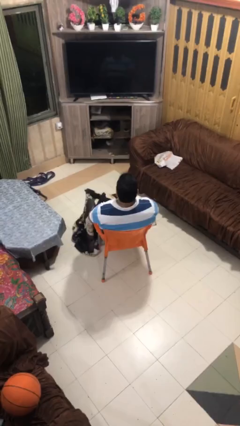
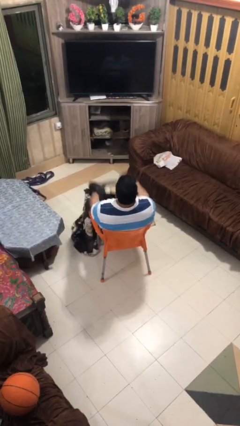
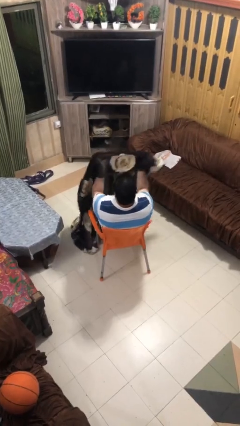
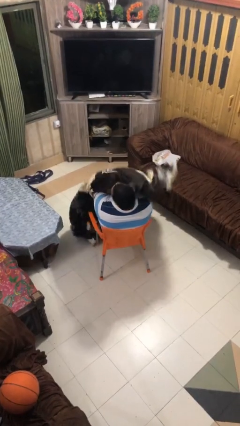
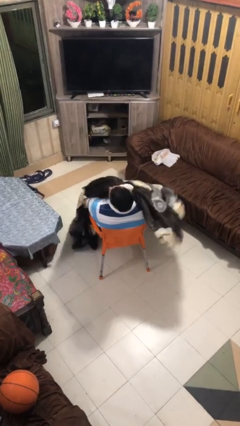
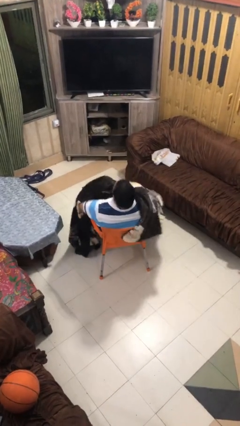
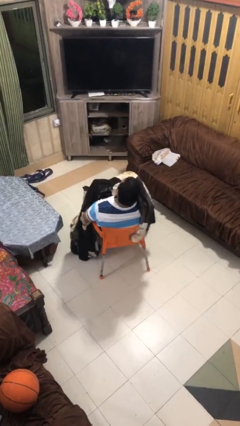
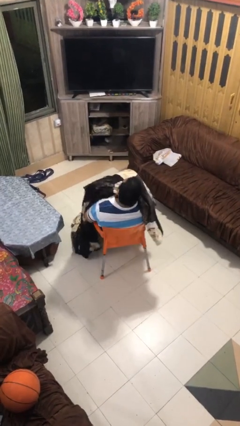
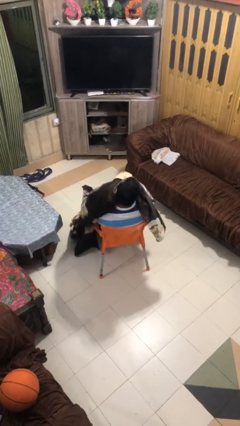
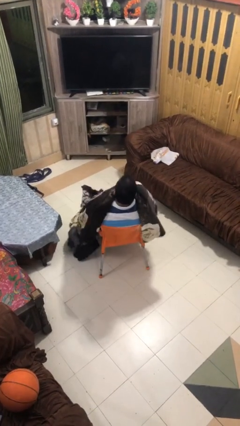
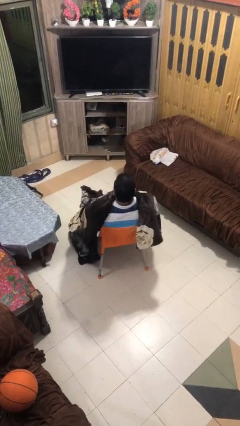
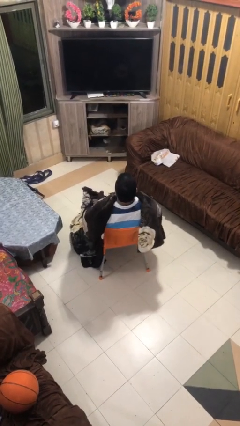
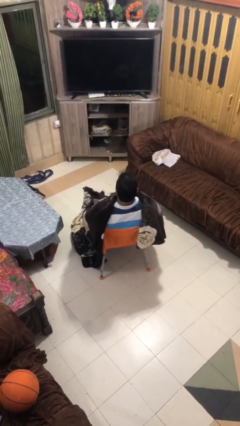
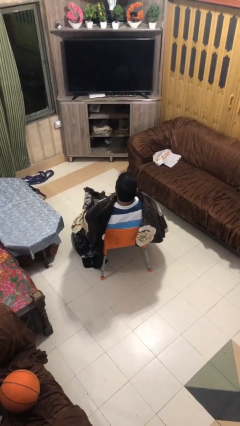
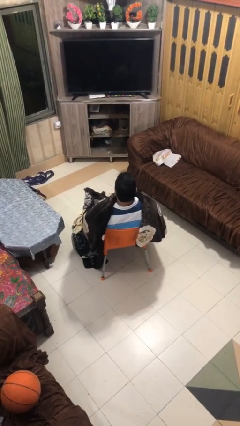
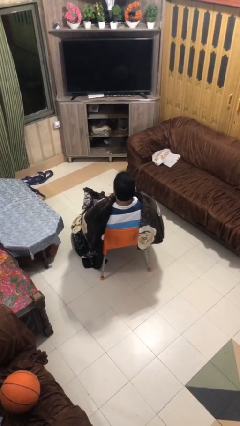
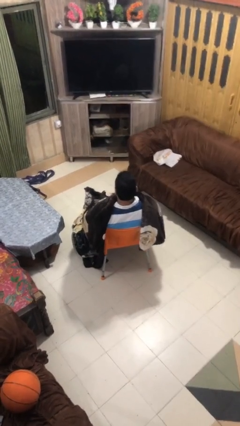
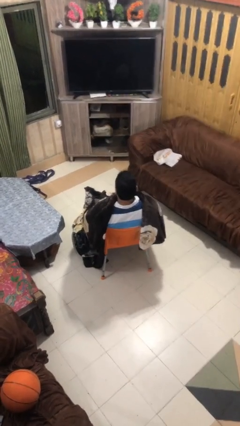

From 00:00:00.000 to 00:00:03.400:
person covers with blanket

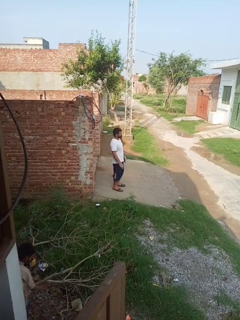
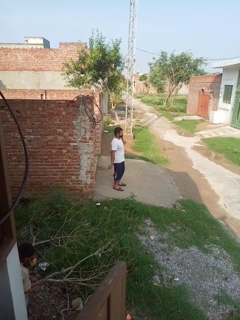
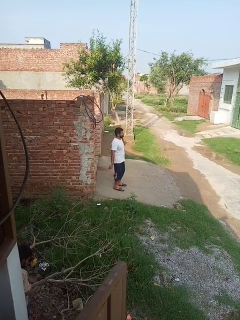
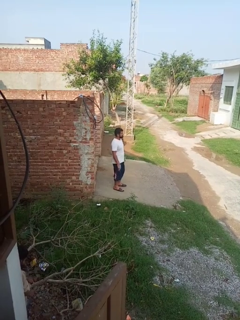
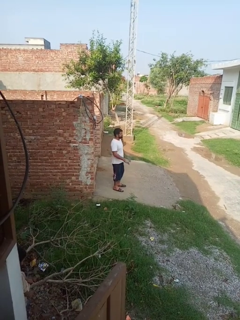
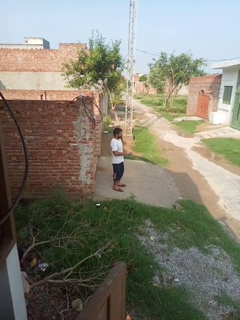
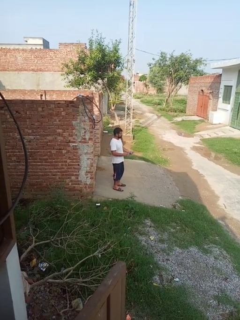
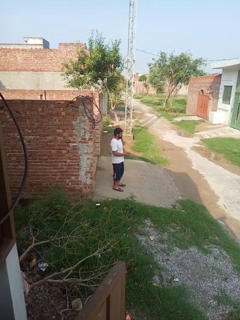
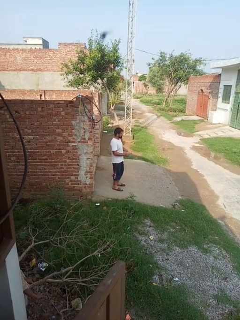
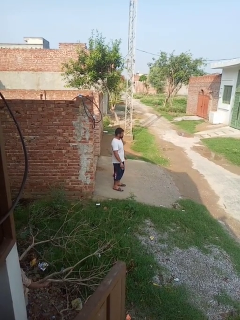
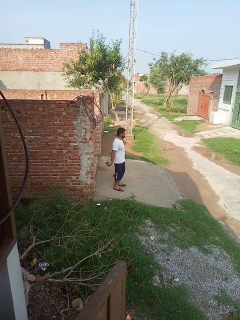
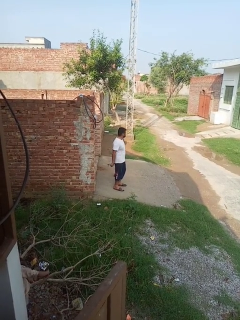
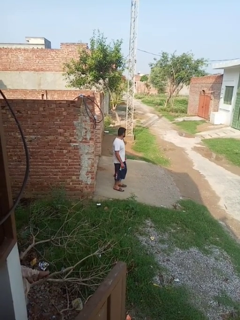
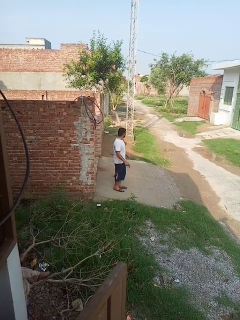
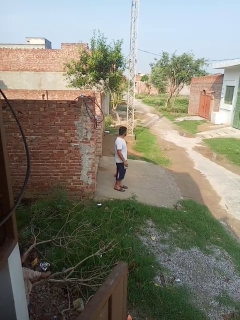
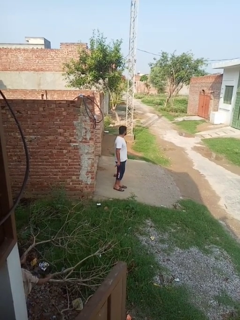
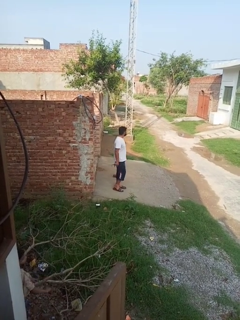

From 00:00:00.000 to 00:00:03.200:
person takes off gloves

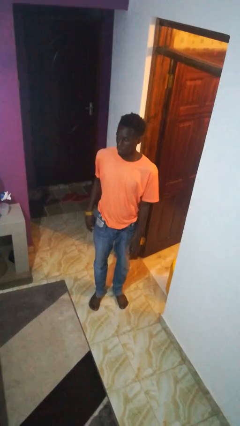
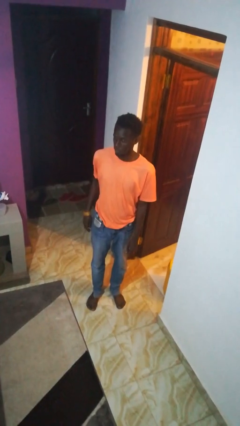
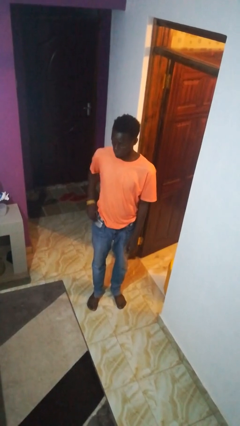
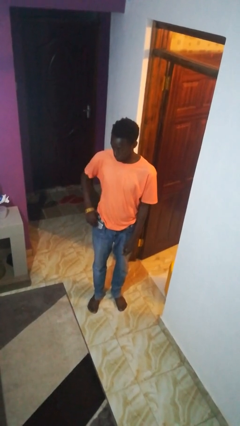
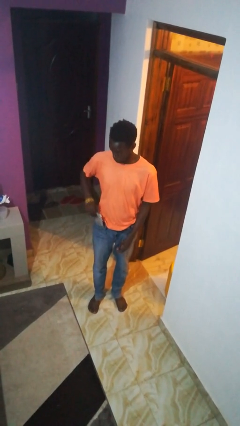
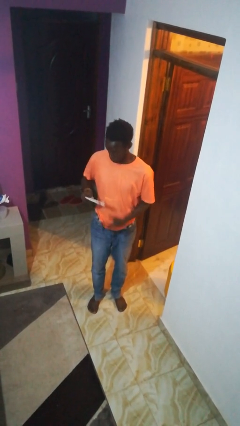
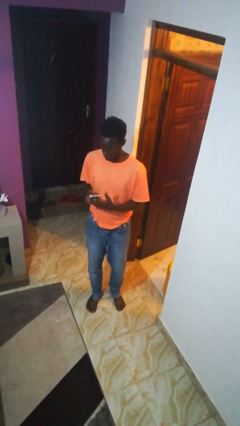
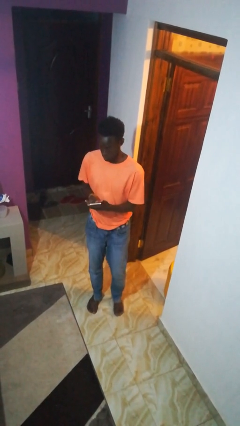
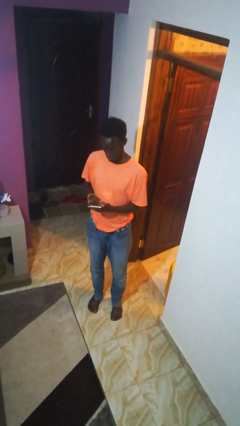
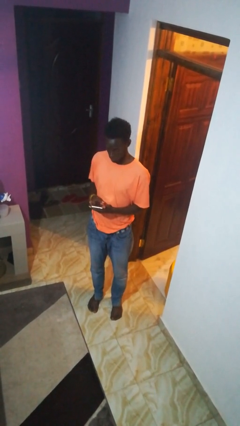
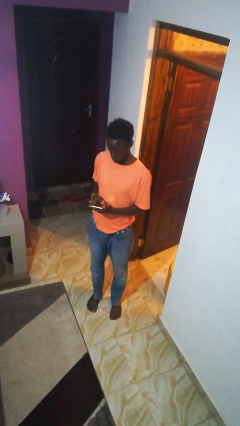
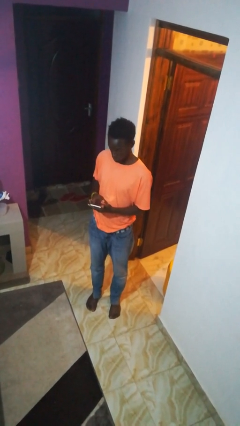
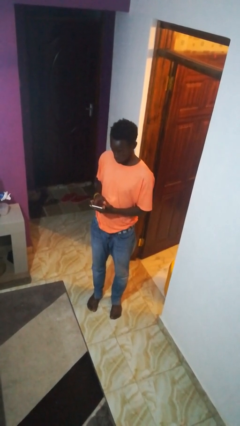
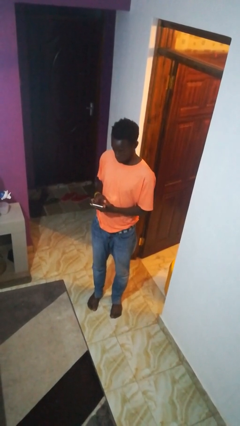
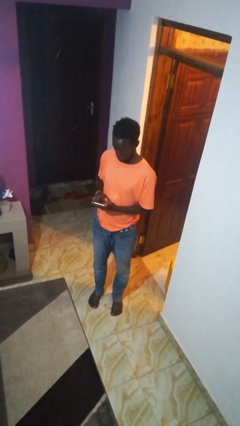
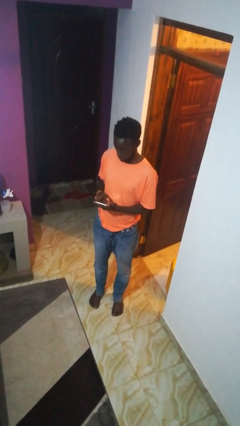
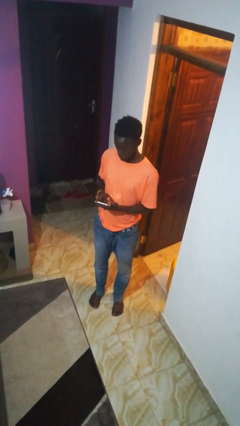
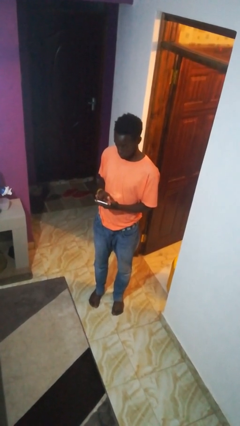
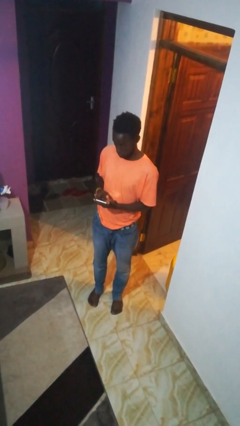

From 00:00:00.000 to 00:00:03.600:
person takes phone from pocket

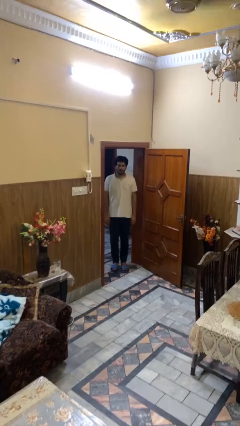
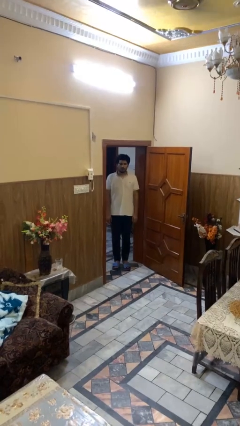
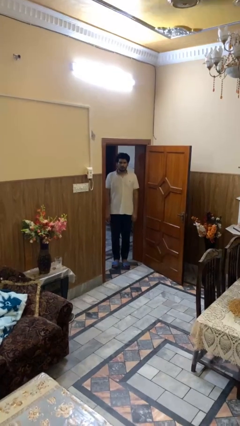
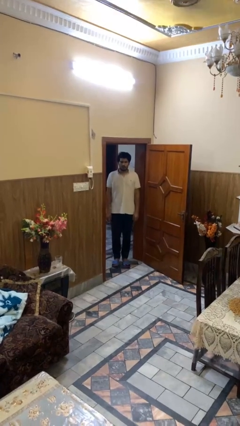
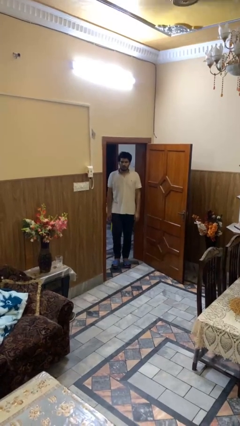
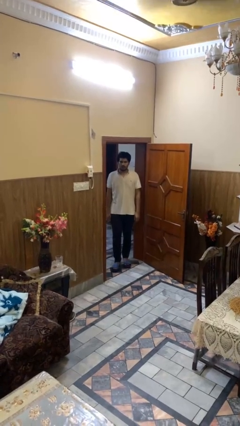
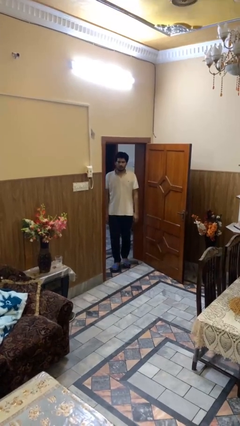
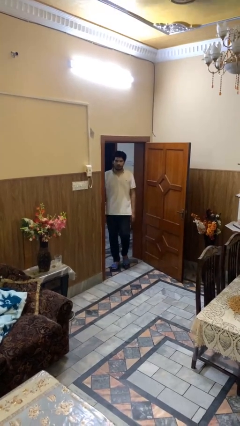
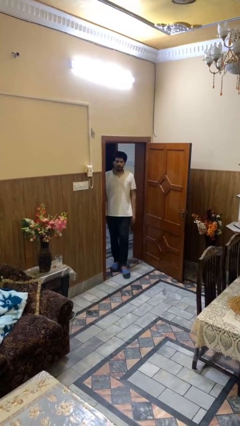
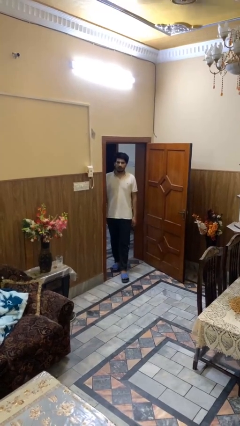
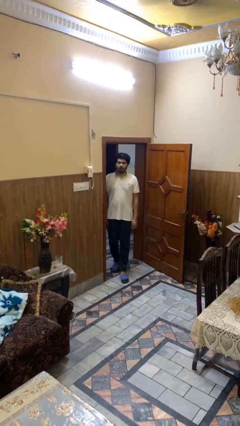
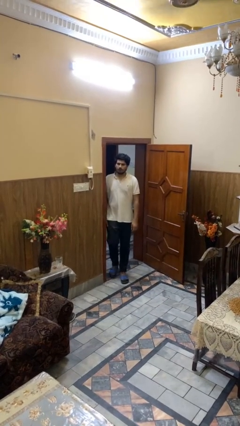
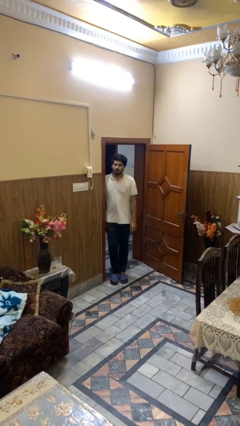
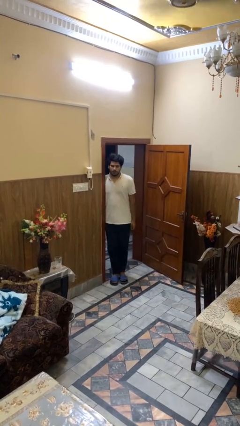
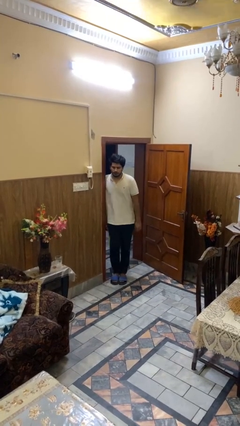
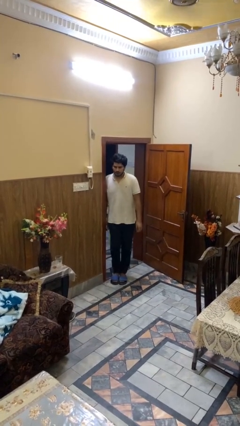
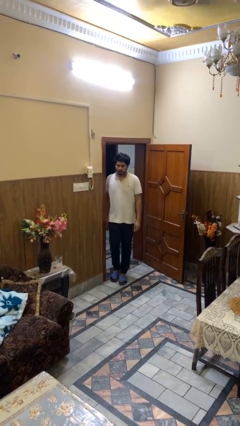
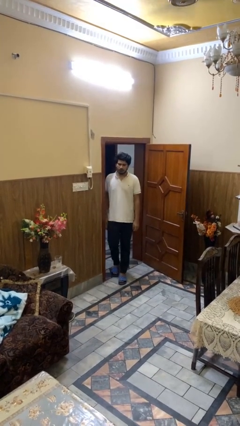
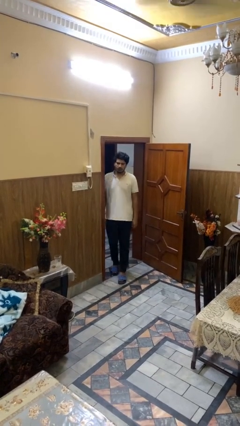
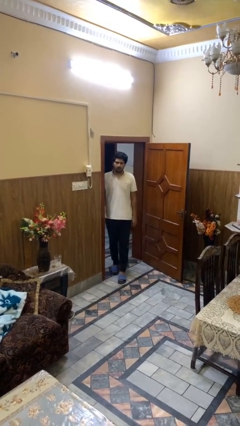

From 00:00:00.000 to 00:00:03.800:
person bumps into wall

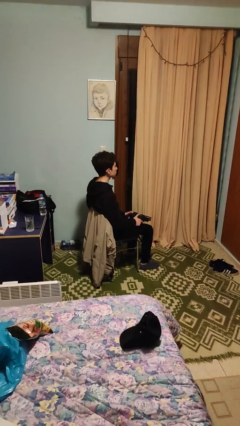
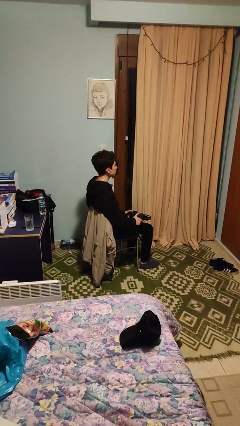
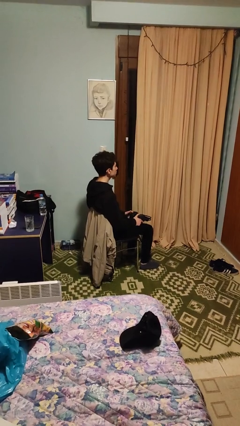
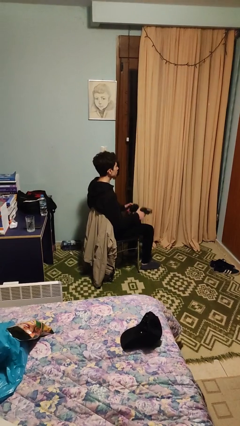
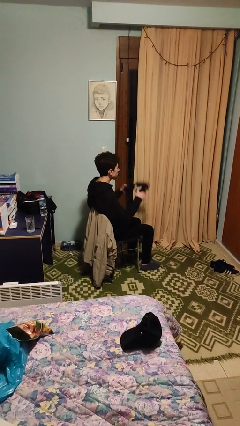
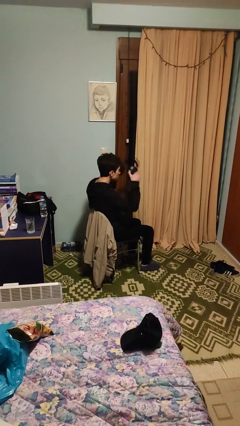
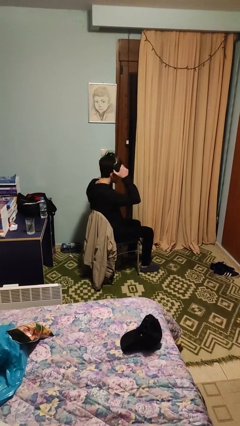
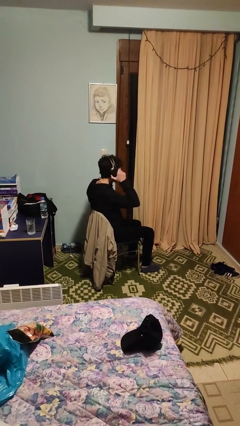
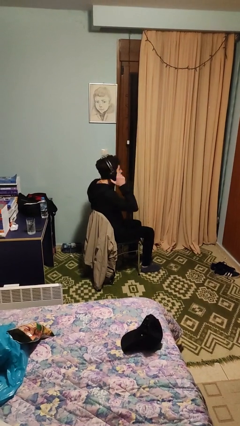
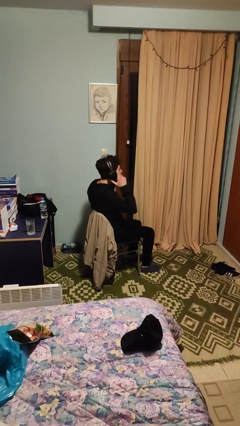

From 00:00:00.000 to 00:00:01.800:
person puts on headphones

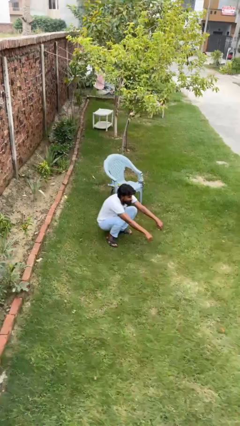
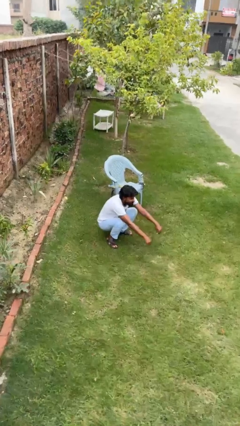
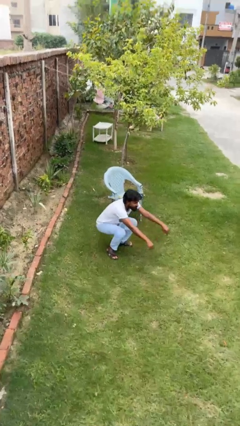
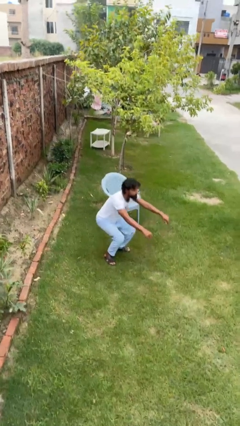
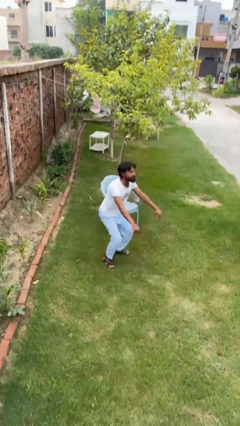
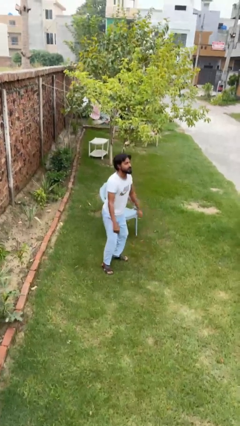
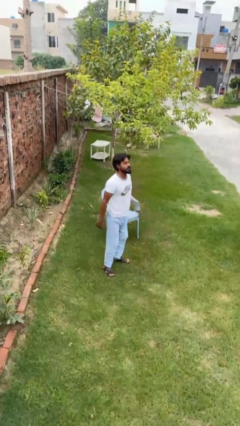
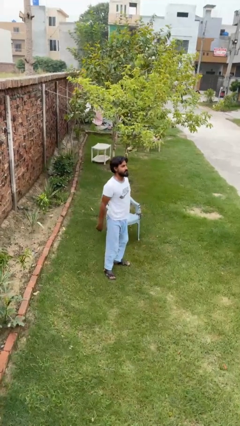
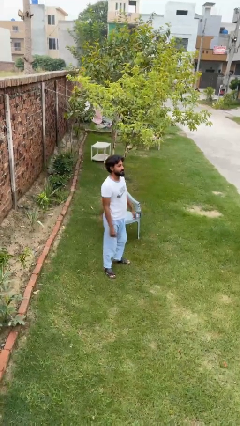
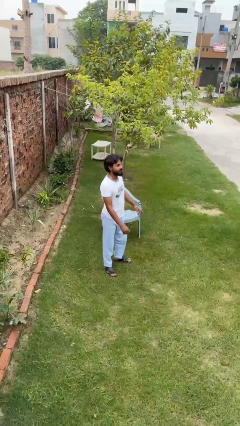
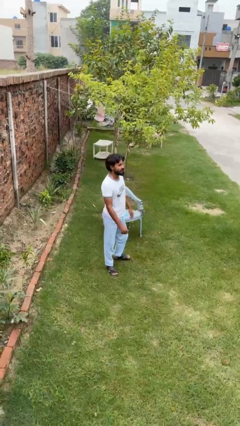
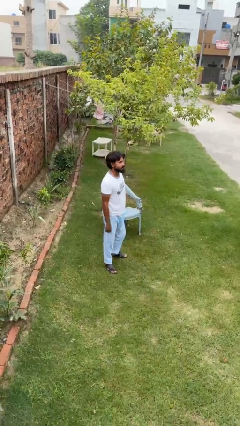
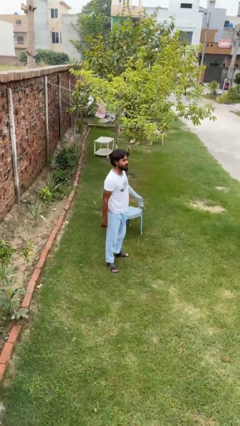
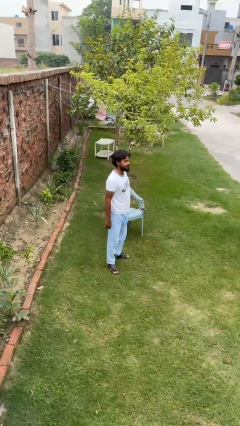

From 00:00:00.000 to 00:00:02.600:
person stands up
